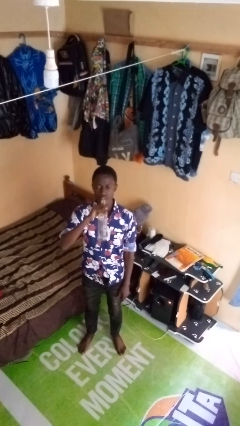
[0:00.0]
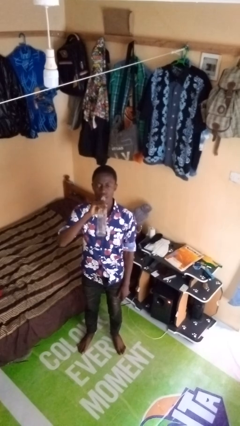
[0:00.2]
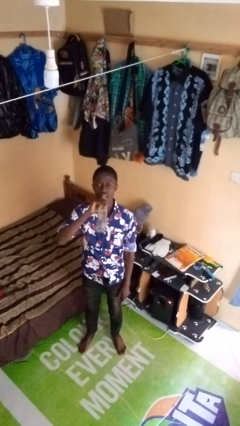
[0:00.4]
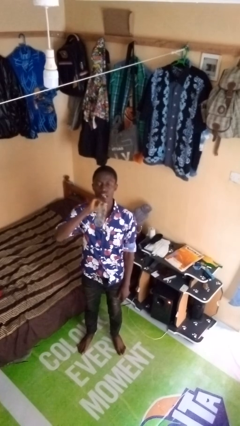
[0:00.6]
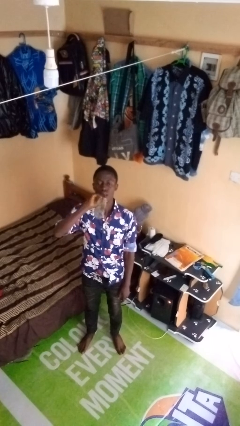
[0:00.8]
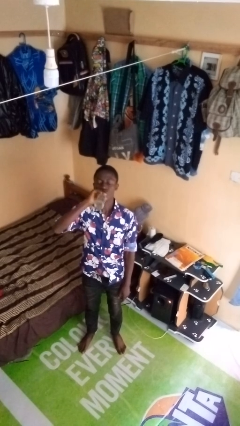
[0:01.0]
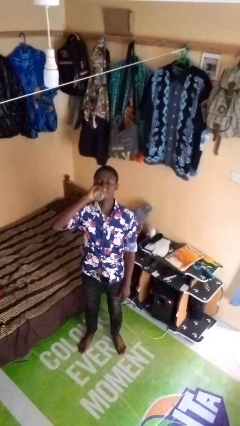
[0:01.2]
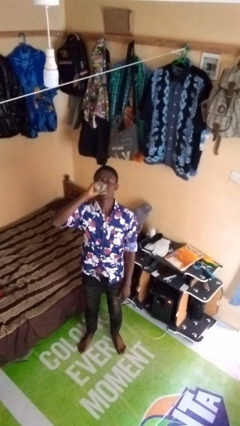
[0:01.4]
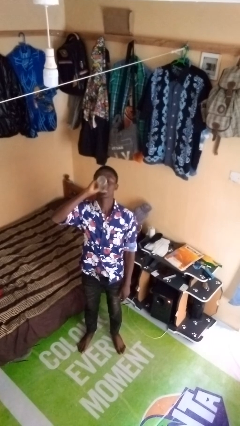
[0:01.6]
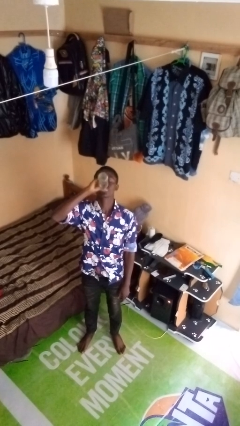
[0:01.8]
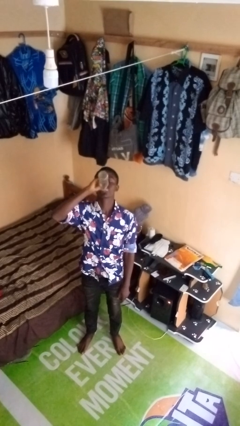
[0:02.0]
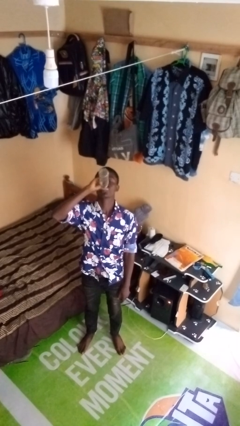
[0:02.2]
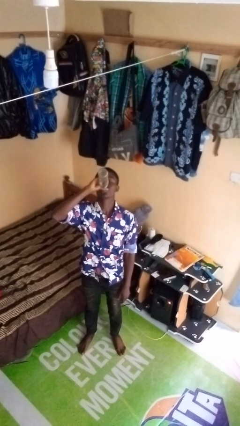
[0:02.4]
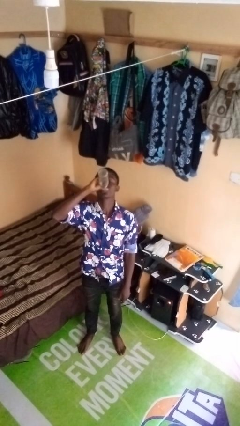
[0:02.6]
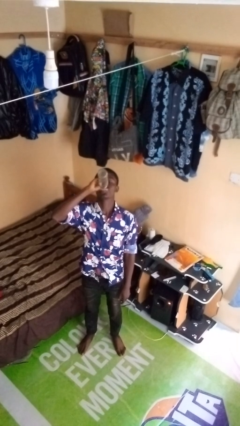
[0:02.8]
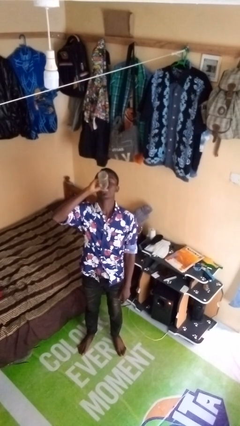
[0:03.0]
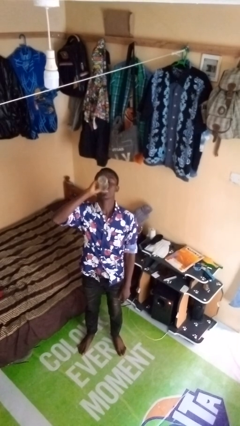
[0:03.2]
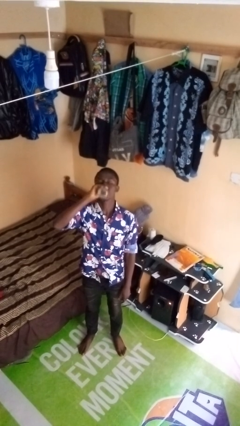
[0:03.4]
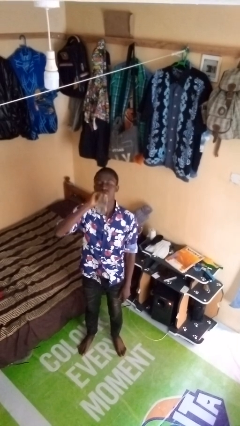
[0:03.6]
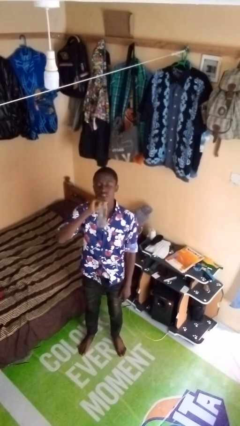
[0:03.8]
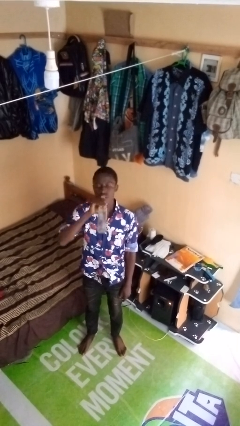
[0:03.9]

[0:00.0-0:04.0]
person drinks from bottle

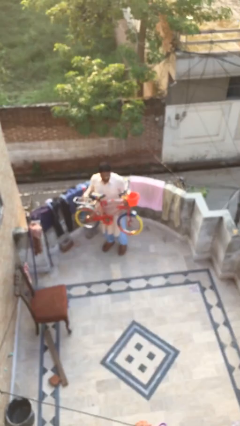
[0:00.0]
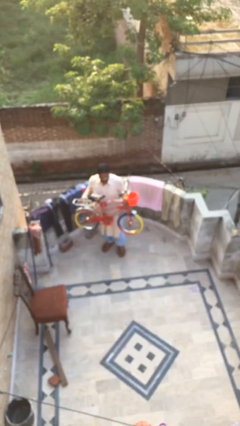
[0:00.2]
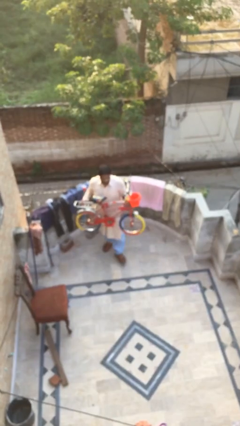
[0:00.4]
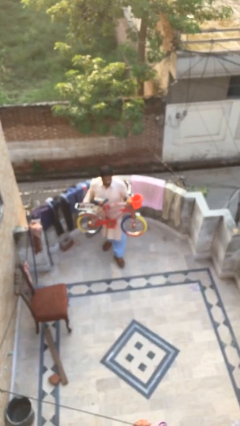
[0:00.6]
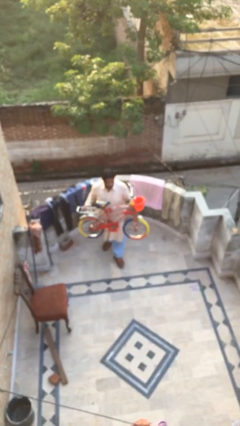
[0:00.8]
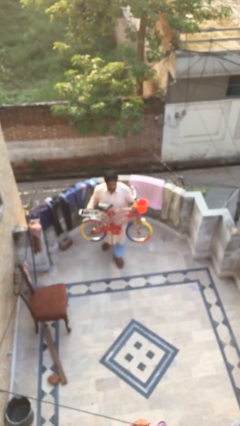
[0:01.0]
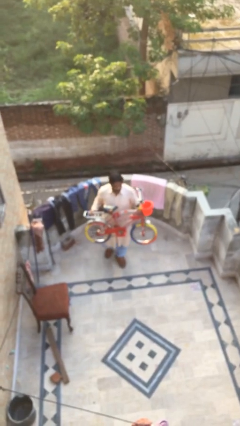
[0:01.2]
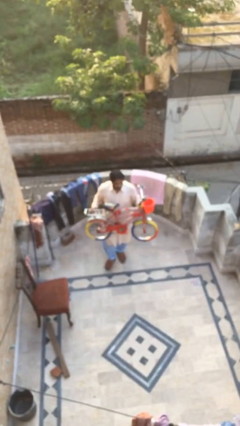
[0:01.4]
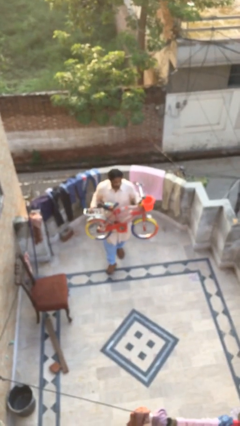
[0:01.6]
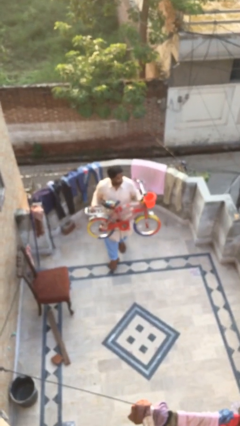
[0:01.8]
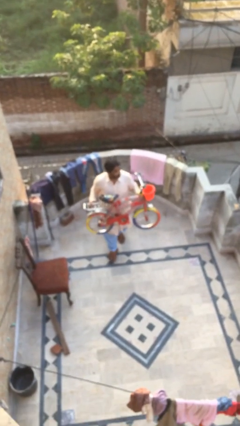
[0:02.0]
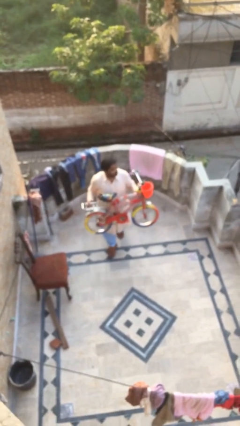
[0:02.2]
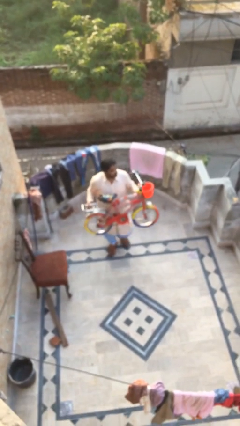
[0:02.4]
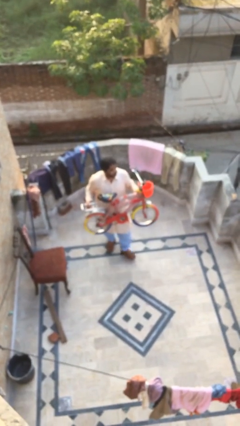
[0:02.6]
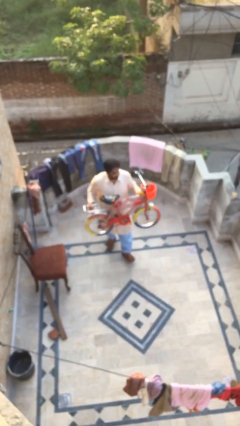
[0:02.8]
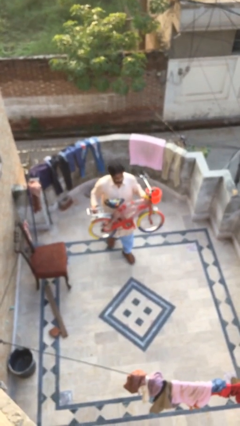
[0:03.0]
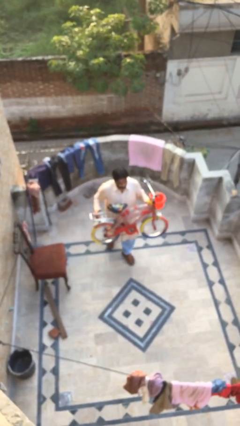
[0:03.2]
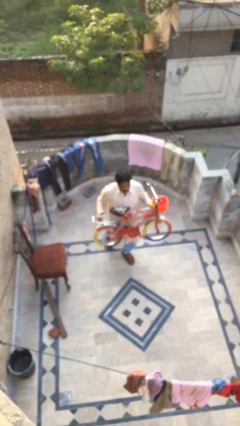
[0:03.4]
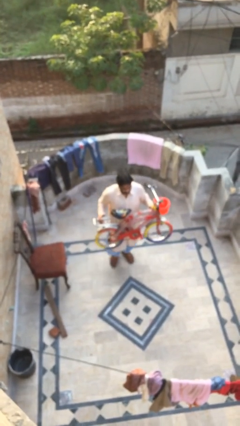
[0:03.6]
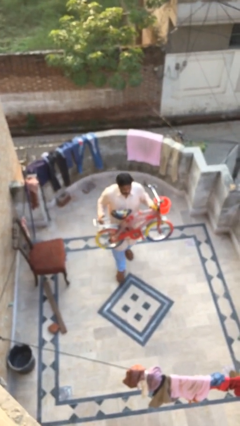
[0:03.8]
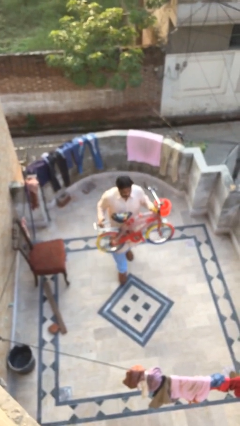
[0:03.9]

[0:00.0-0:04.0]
person carries heavy object

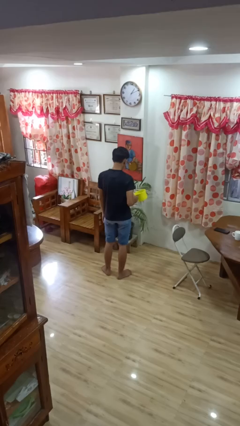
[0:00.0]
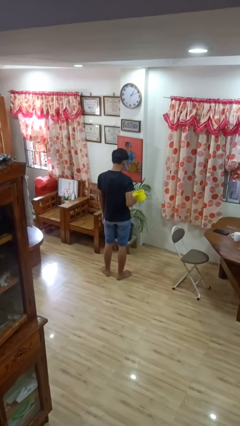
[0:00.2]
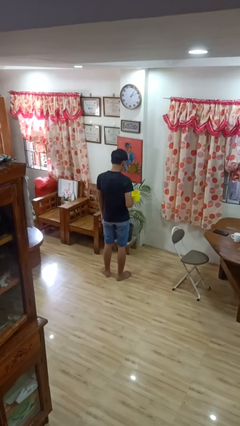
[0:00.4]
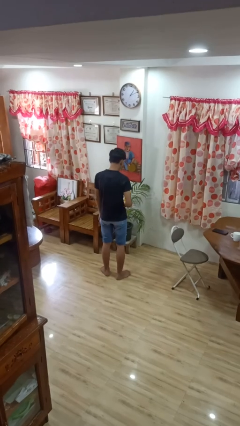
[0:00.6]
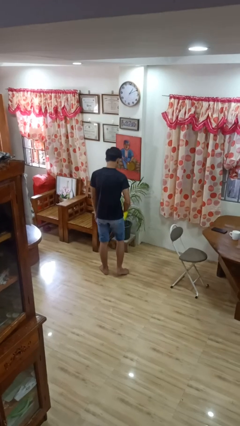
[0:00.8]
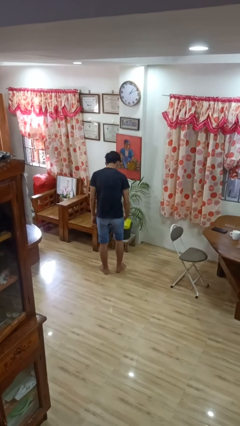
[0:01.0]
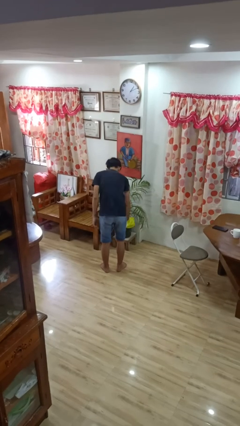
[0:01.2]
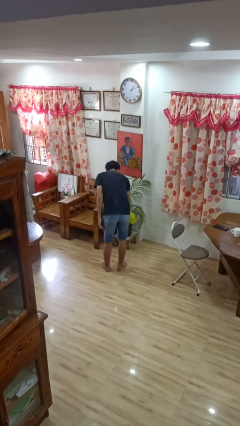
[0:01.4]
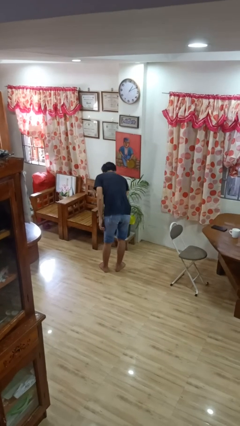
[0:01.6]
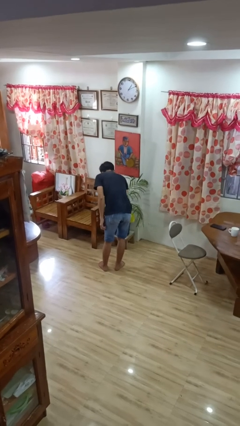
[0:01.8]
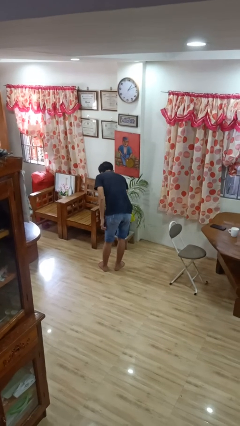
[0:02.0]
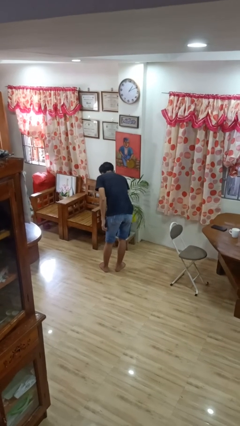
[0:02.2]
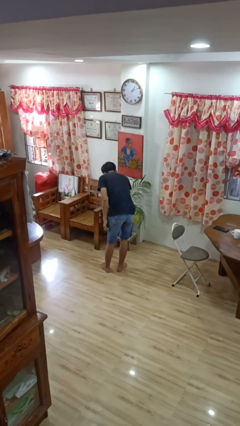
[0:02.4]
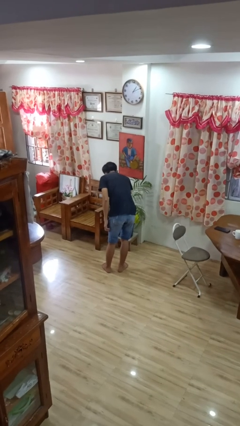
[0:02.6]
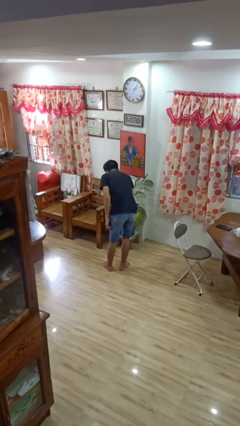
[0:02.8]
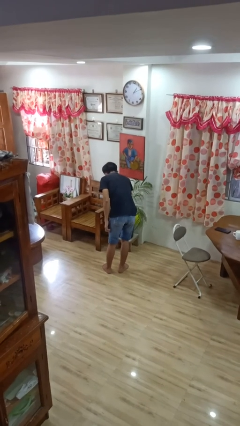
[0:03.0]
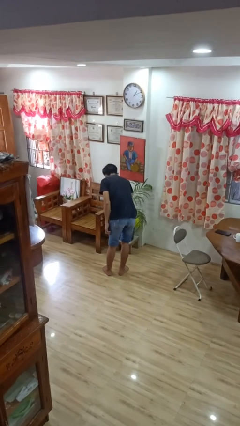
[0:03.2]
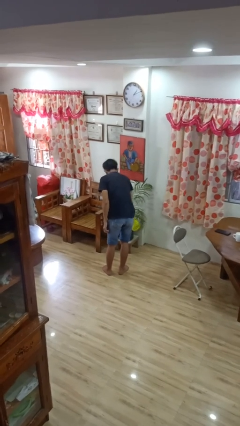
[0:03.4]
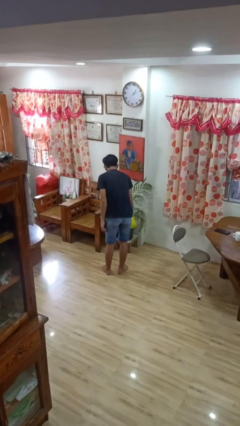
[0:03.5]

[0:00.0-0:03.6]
person waters houseplant

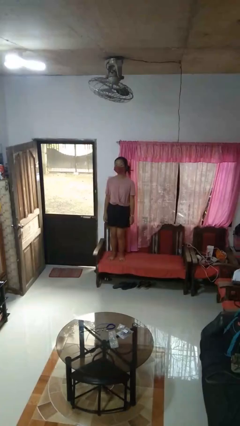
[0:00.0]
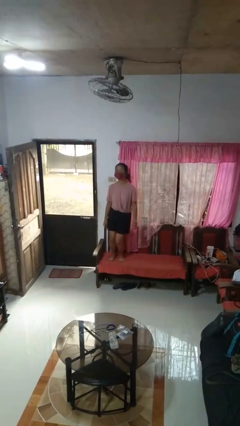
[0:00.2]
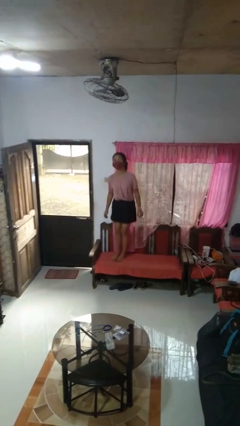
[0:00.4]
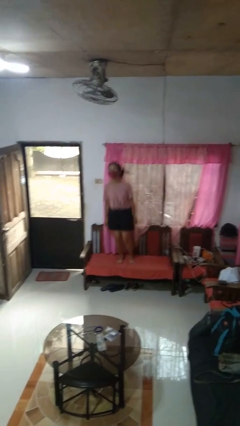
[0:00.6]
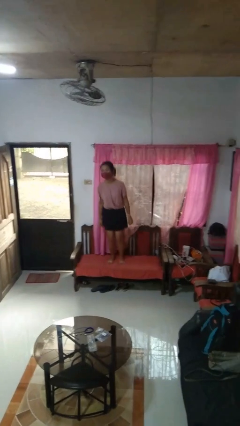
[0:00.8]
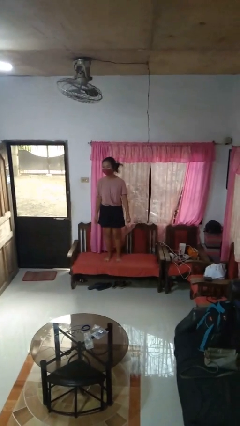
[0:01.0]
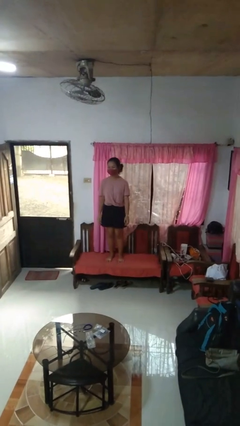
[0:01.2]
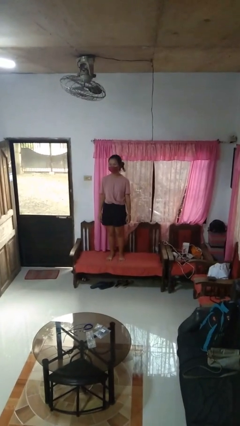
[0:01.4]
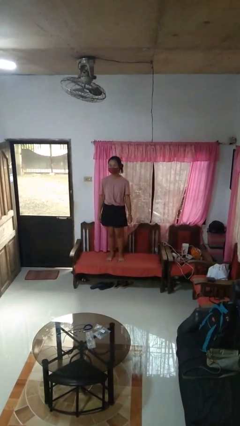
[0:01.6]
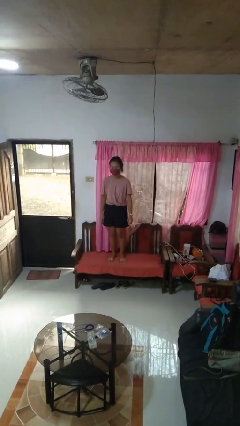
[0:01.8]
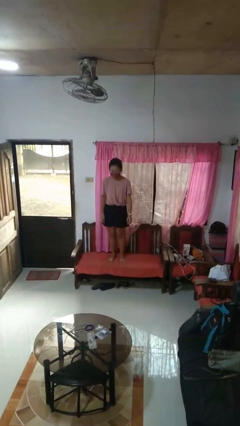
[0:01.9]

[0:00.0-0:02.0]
person jumps on couch

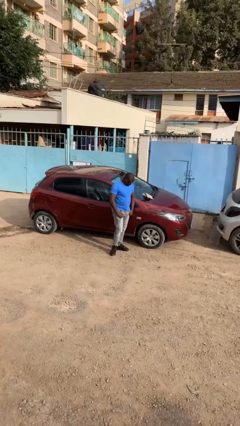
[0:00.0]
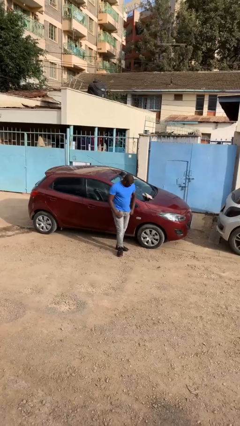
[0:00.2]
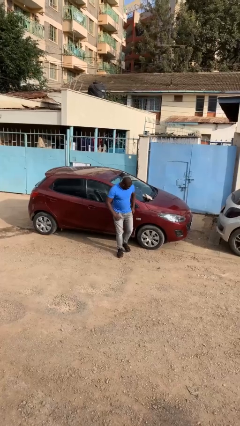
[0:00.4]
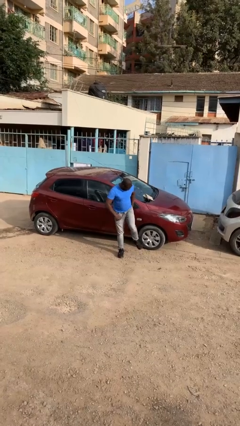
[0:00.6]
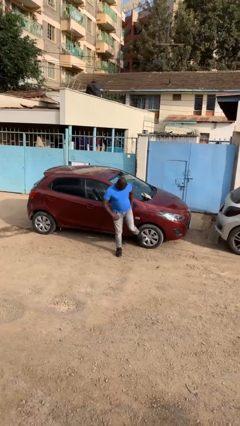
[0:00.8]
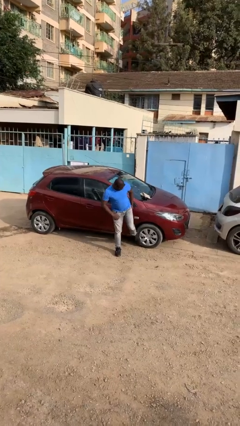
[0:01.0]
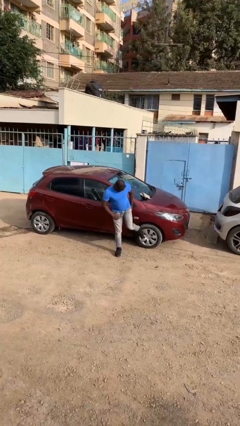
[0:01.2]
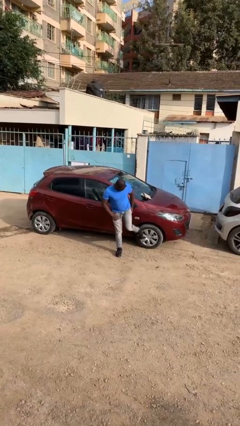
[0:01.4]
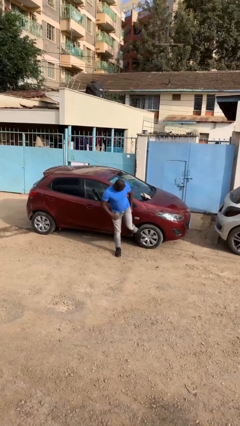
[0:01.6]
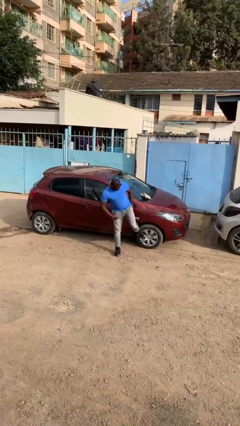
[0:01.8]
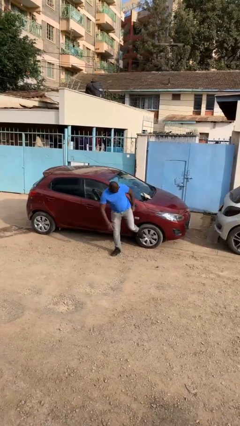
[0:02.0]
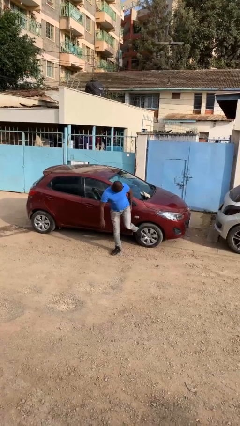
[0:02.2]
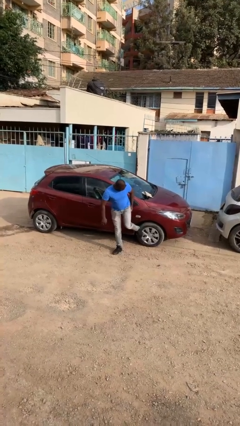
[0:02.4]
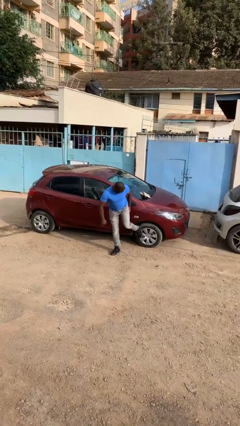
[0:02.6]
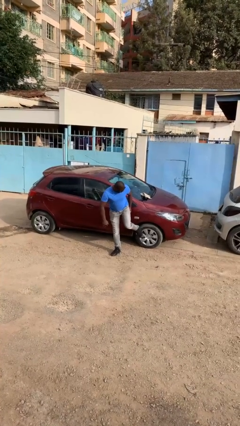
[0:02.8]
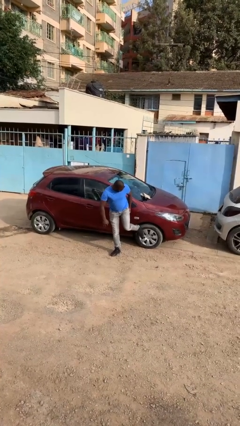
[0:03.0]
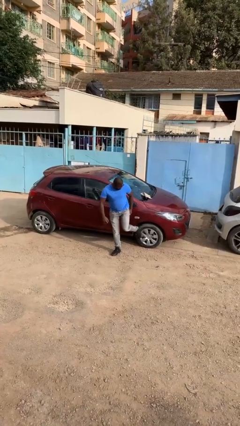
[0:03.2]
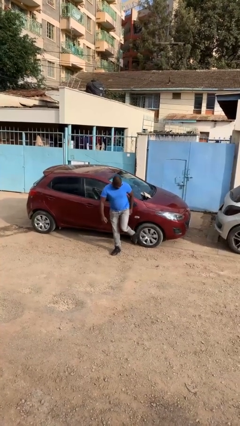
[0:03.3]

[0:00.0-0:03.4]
person kicks car tires

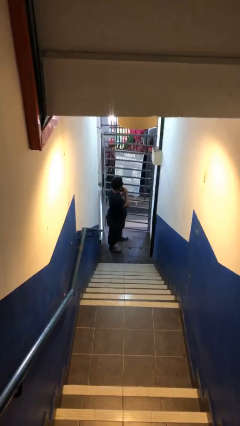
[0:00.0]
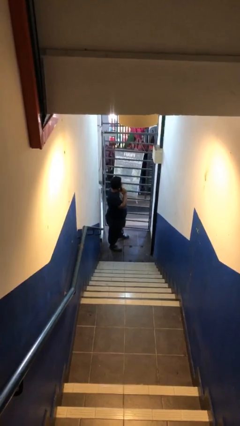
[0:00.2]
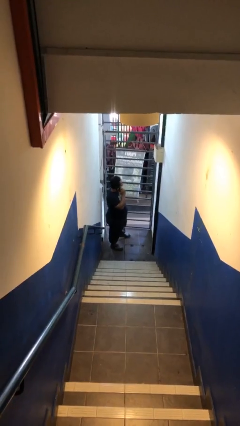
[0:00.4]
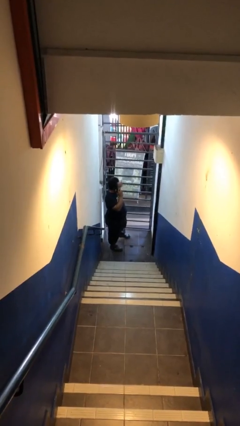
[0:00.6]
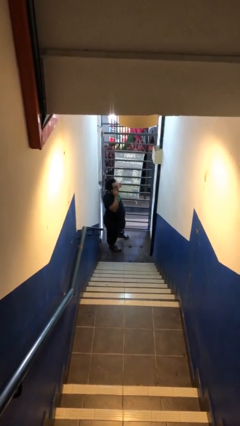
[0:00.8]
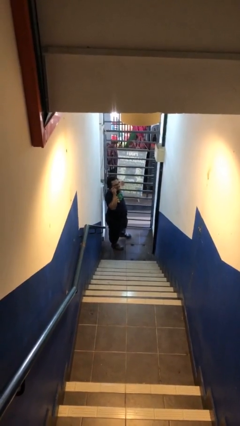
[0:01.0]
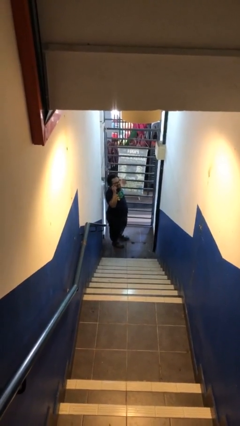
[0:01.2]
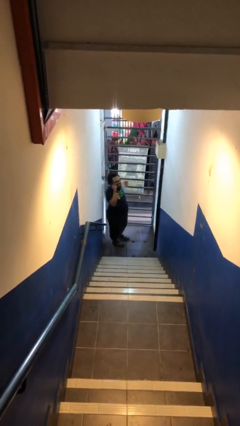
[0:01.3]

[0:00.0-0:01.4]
person closes facility door
